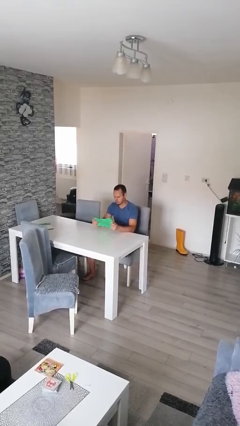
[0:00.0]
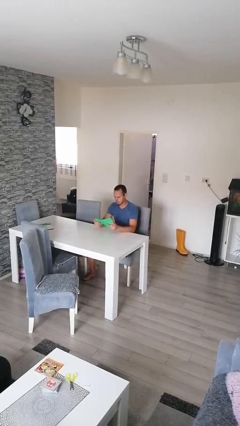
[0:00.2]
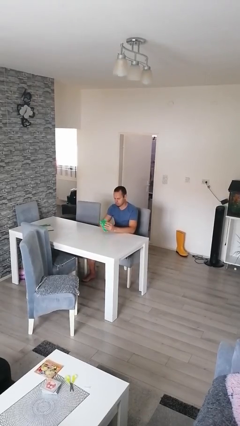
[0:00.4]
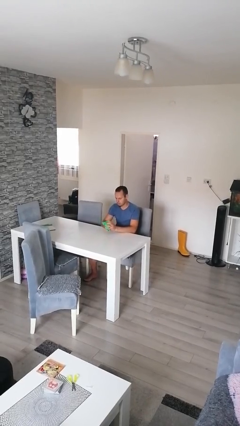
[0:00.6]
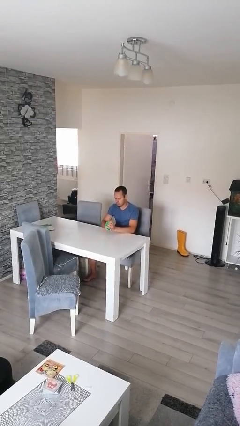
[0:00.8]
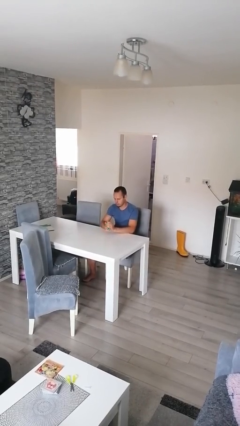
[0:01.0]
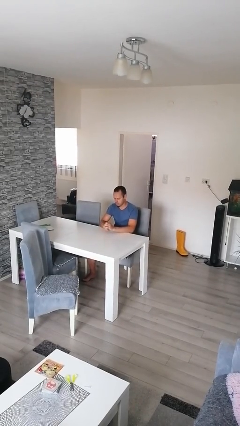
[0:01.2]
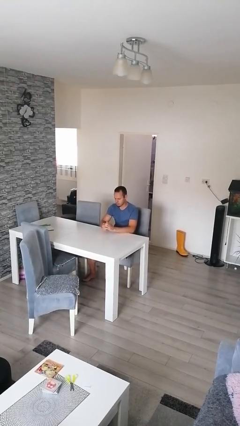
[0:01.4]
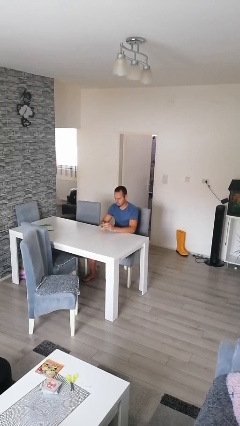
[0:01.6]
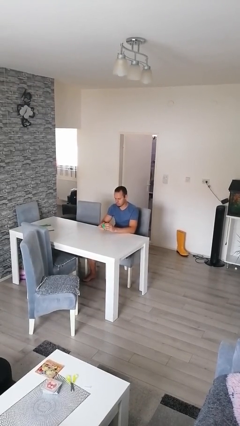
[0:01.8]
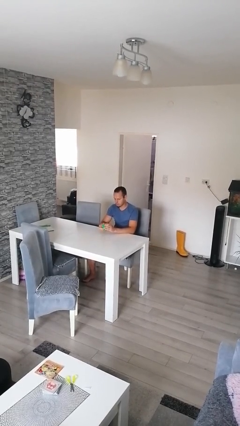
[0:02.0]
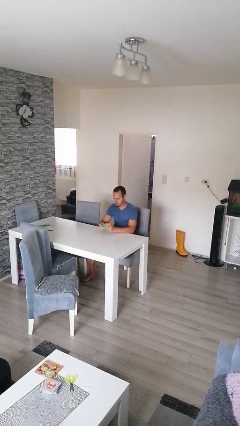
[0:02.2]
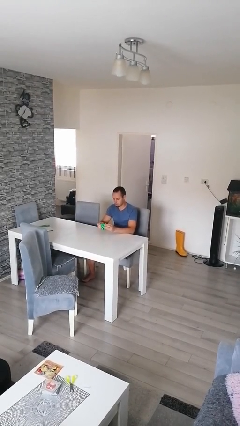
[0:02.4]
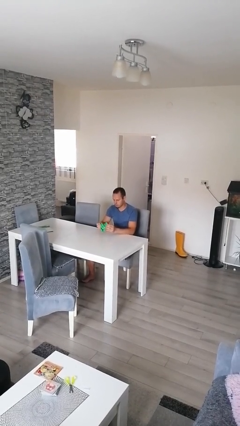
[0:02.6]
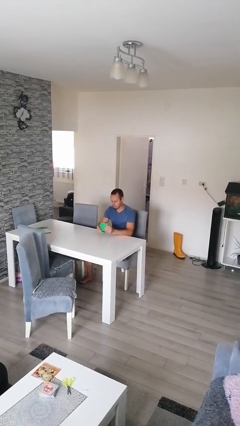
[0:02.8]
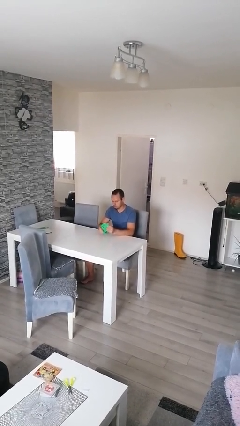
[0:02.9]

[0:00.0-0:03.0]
person crumples paper

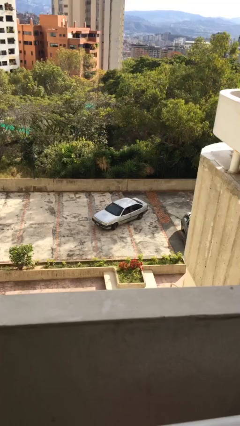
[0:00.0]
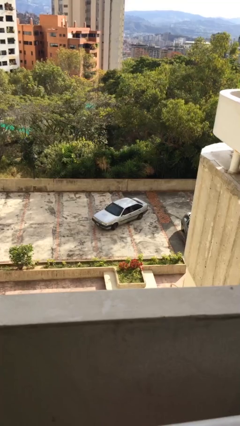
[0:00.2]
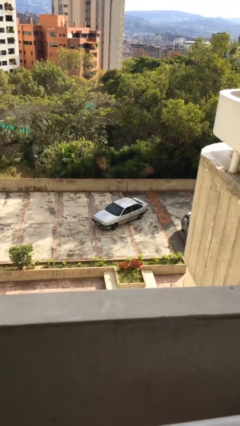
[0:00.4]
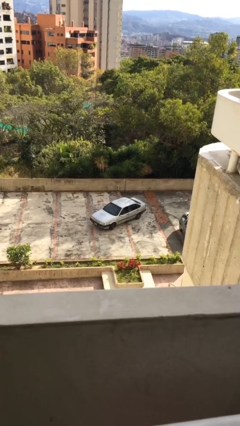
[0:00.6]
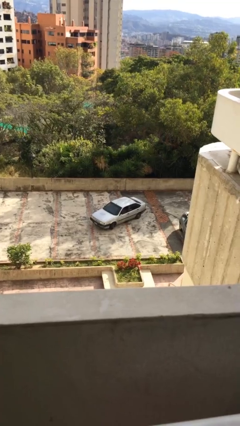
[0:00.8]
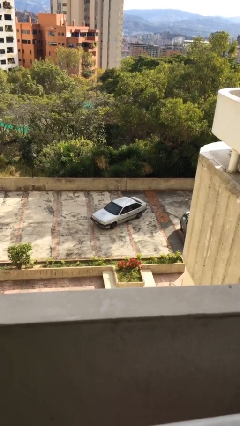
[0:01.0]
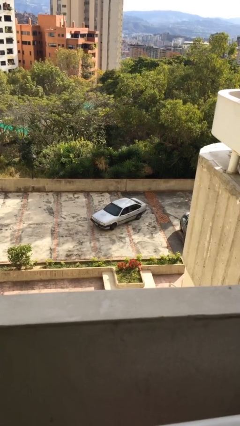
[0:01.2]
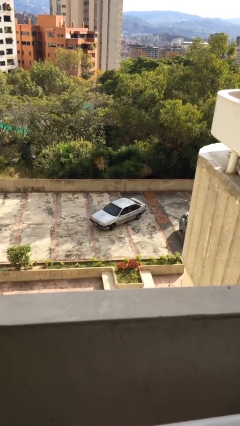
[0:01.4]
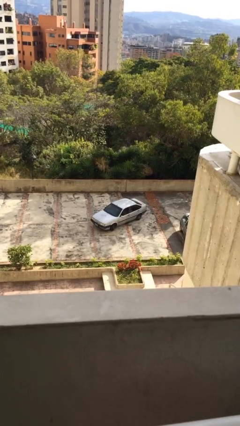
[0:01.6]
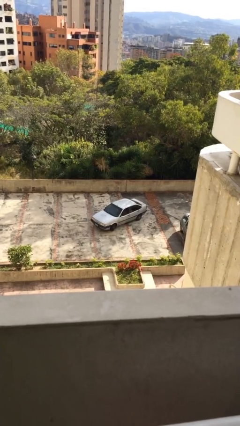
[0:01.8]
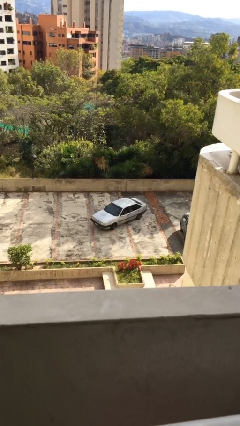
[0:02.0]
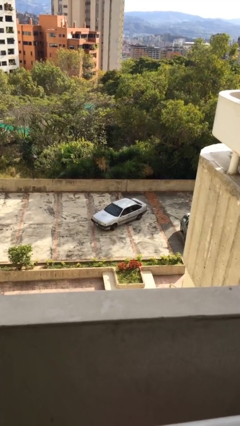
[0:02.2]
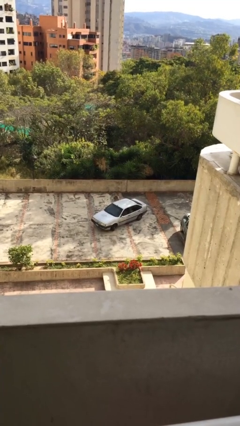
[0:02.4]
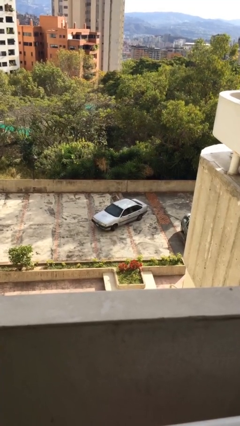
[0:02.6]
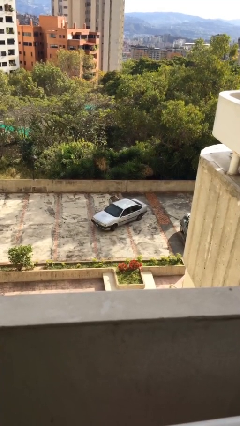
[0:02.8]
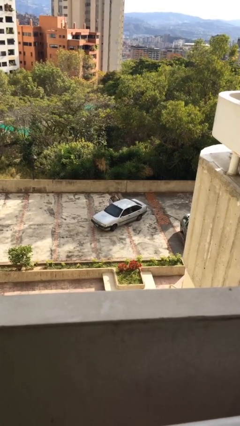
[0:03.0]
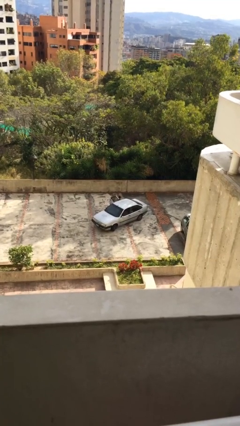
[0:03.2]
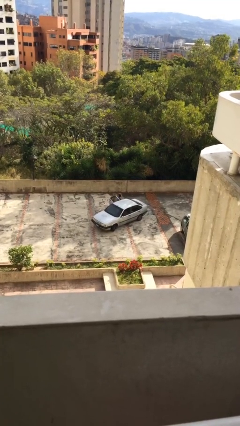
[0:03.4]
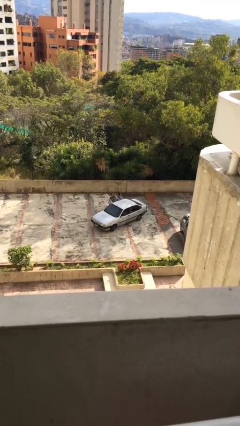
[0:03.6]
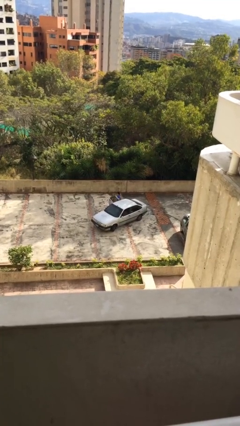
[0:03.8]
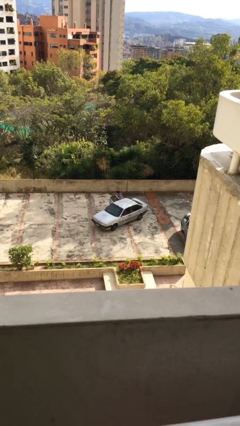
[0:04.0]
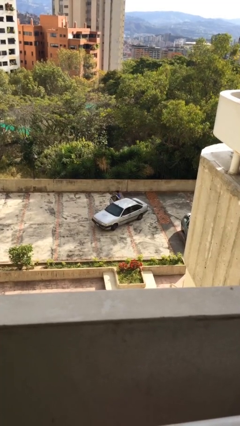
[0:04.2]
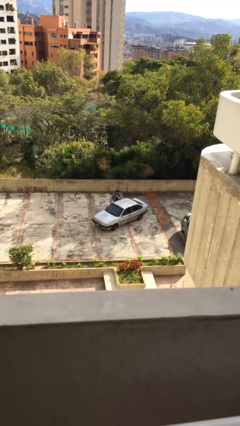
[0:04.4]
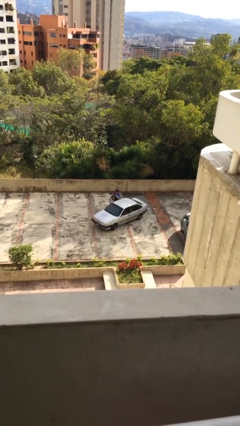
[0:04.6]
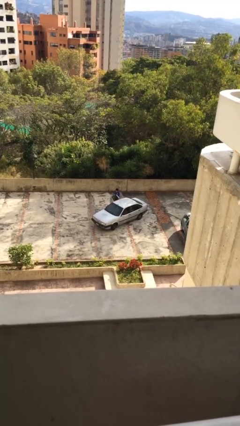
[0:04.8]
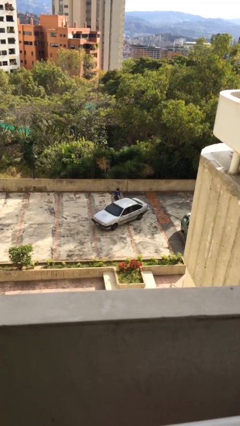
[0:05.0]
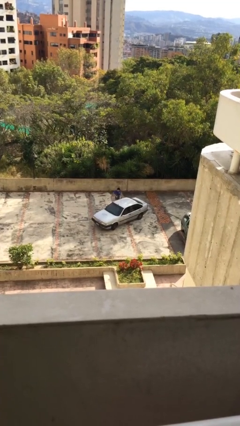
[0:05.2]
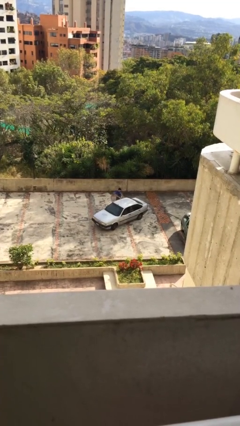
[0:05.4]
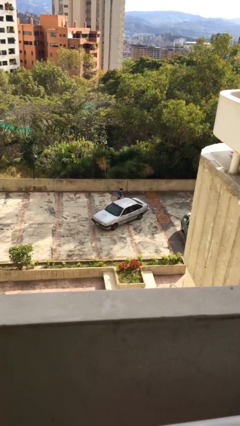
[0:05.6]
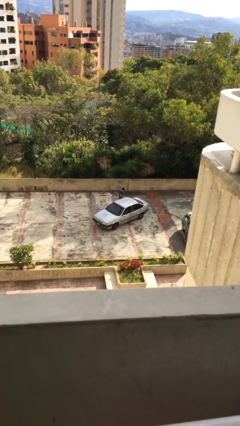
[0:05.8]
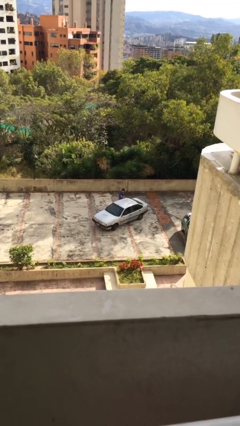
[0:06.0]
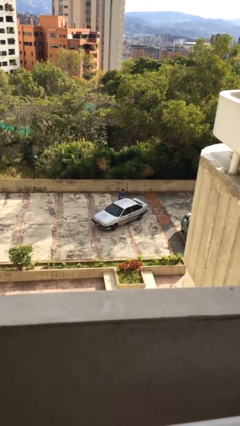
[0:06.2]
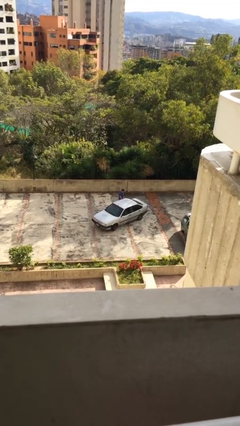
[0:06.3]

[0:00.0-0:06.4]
car drops off person

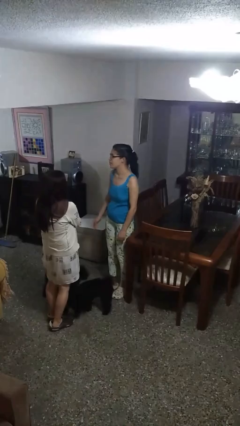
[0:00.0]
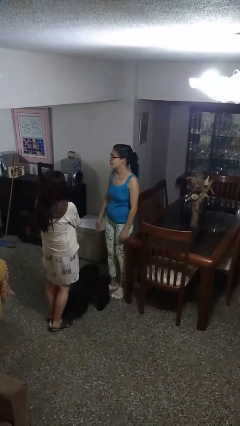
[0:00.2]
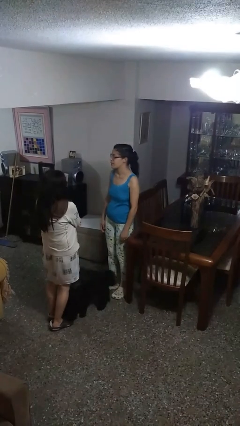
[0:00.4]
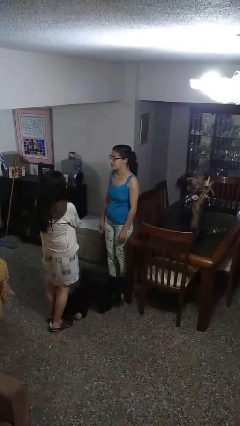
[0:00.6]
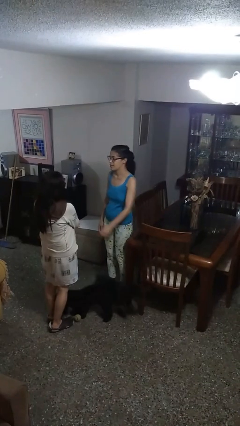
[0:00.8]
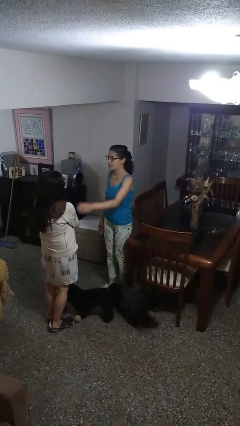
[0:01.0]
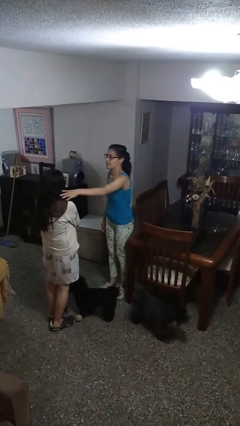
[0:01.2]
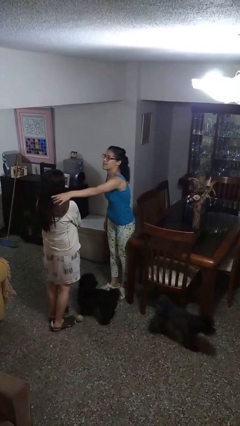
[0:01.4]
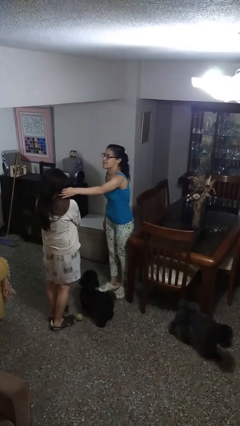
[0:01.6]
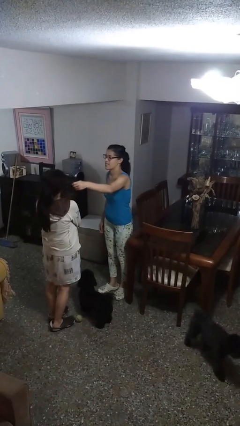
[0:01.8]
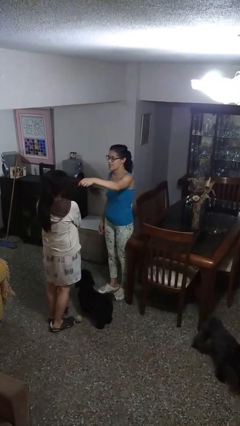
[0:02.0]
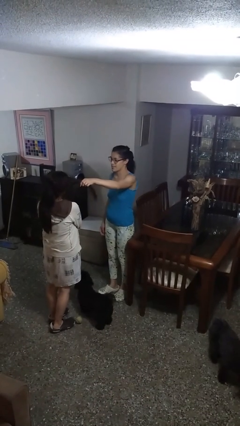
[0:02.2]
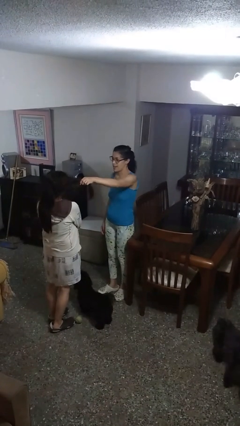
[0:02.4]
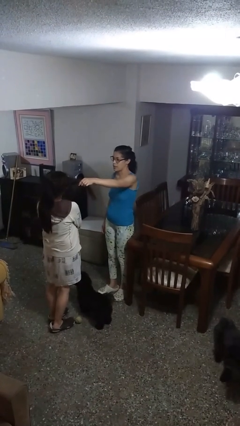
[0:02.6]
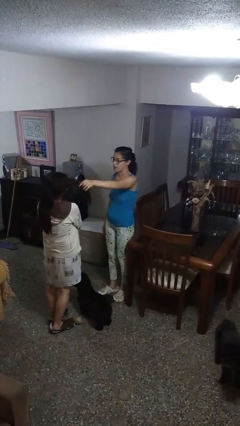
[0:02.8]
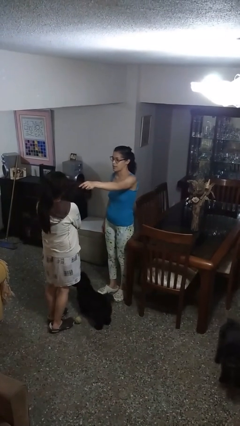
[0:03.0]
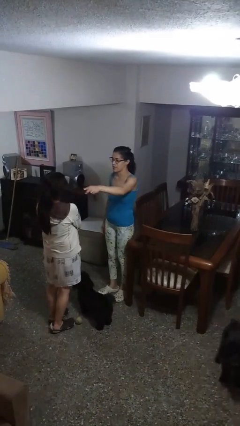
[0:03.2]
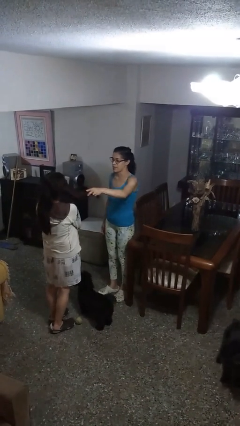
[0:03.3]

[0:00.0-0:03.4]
person grabs person by hair

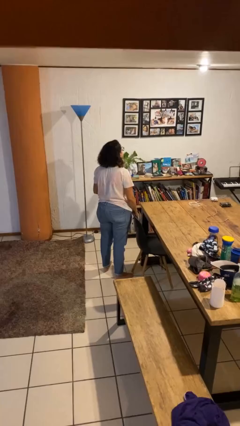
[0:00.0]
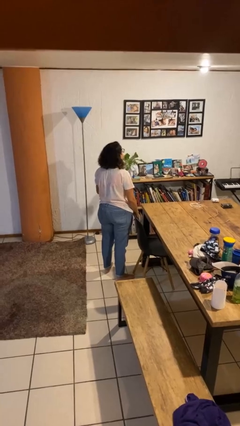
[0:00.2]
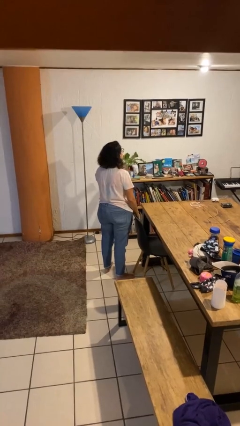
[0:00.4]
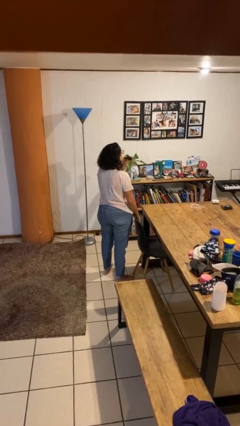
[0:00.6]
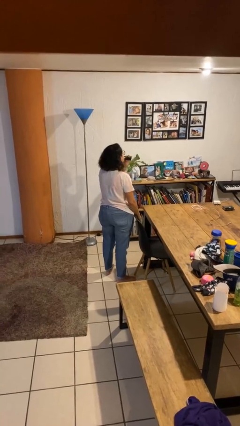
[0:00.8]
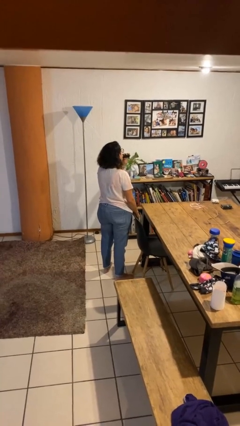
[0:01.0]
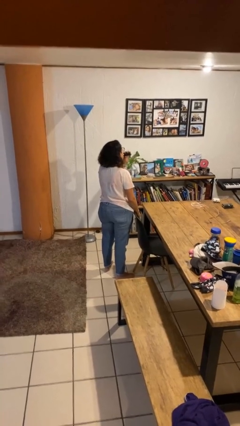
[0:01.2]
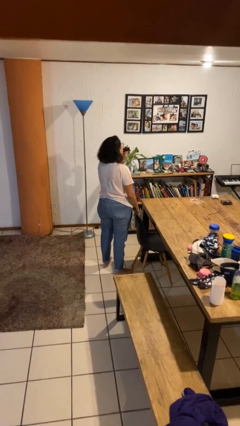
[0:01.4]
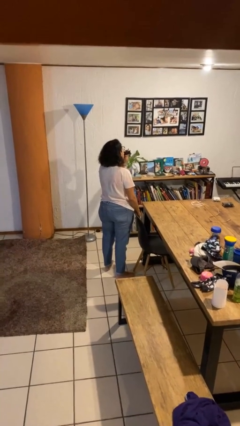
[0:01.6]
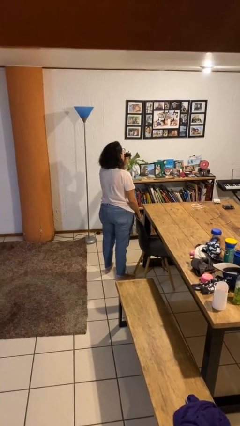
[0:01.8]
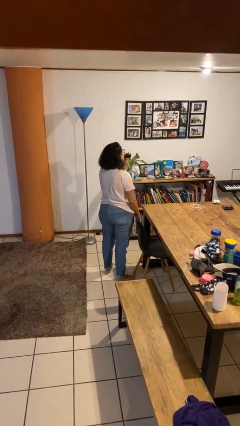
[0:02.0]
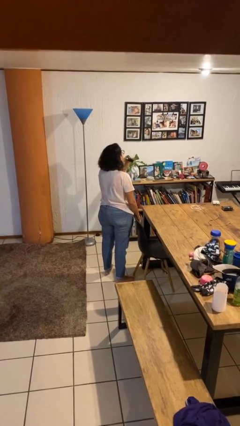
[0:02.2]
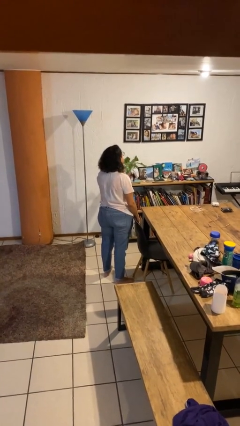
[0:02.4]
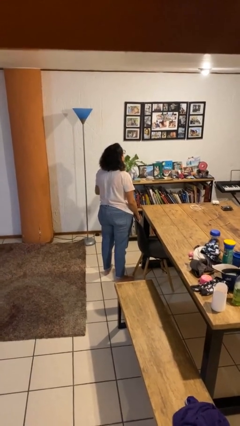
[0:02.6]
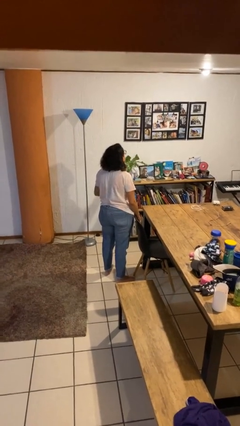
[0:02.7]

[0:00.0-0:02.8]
person vapes

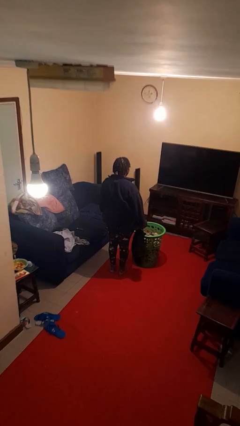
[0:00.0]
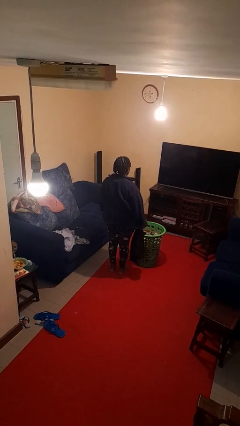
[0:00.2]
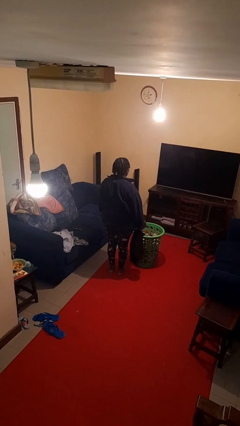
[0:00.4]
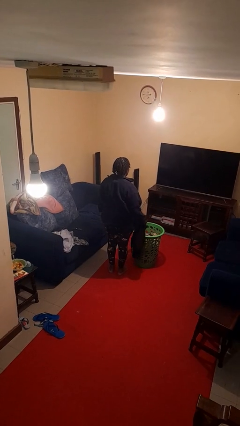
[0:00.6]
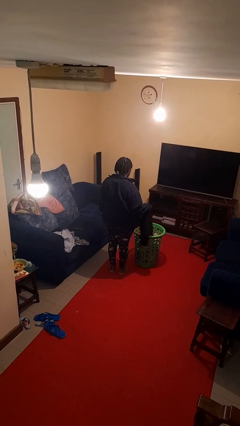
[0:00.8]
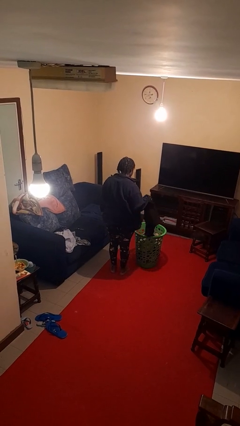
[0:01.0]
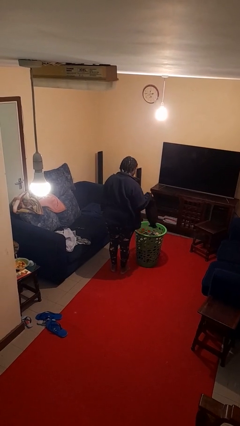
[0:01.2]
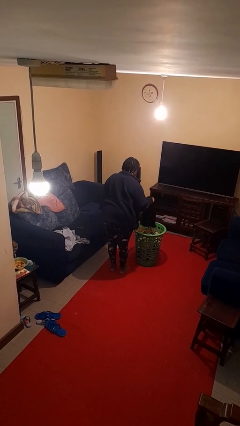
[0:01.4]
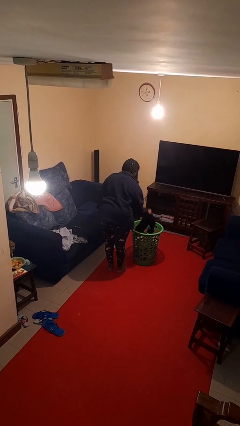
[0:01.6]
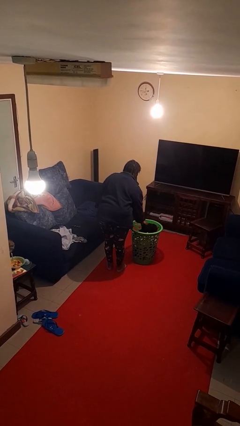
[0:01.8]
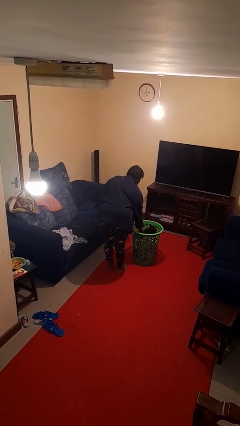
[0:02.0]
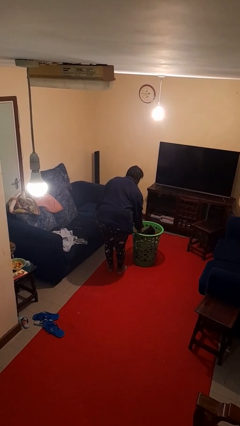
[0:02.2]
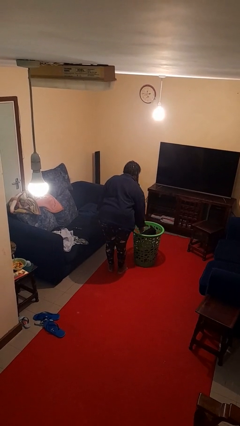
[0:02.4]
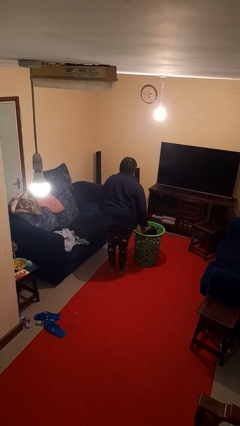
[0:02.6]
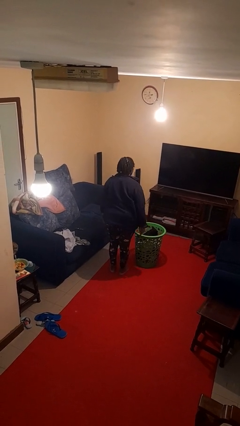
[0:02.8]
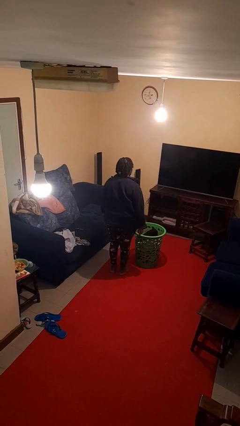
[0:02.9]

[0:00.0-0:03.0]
person puts object into basket
